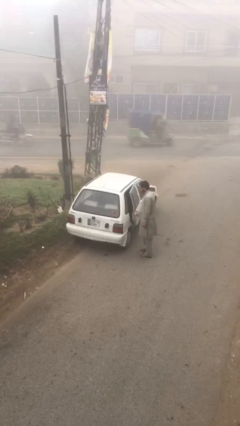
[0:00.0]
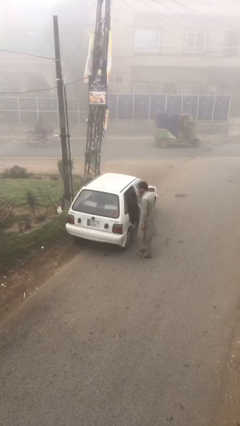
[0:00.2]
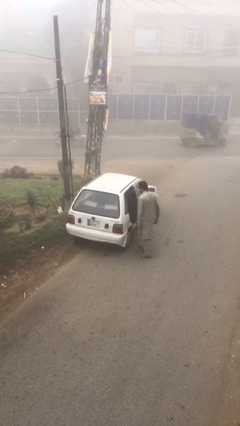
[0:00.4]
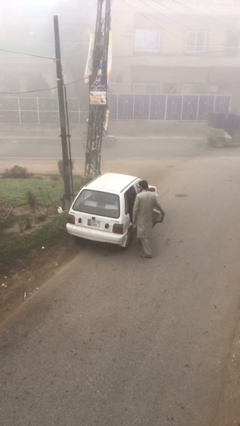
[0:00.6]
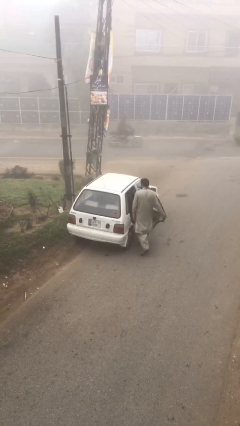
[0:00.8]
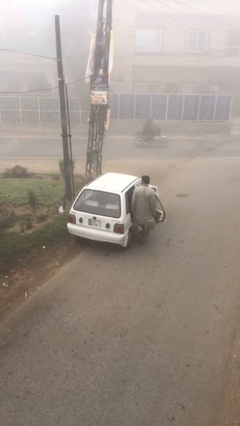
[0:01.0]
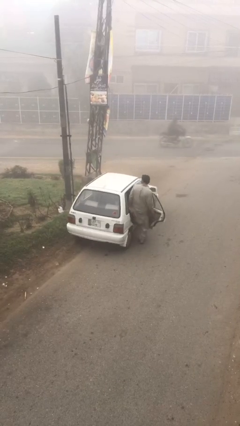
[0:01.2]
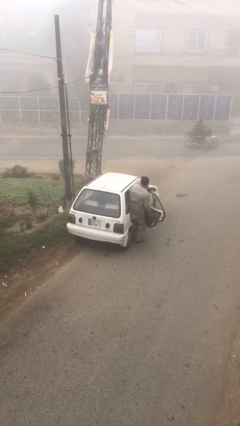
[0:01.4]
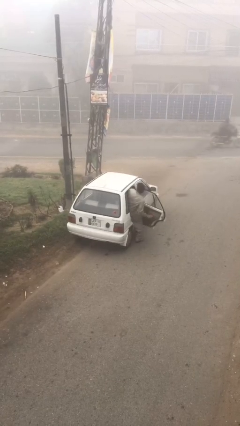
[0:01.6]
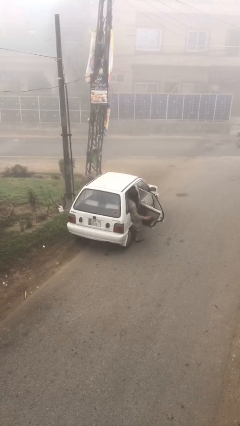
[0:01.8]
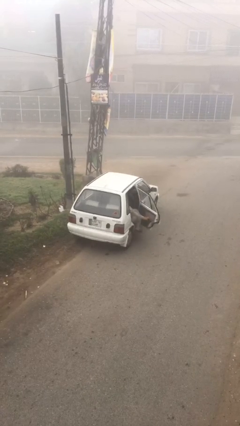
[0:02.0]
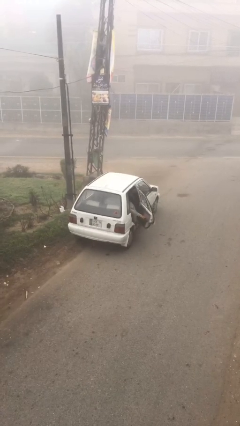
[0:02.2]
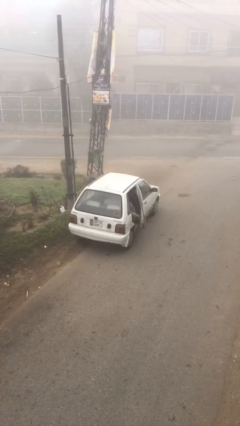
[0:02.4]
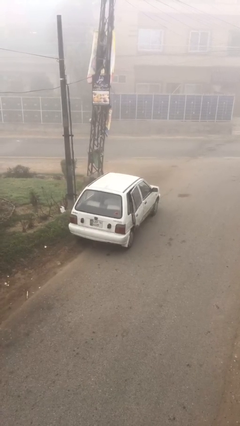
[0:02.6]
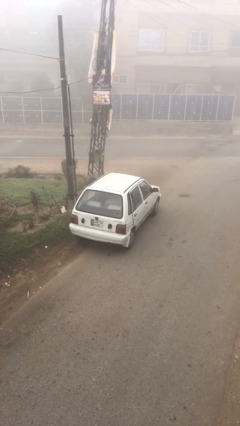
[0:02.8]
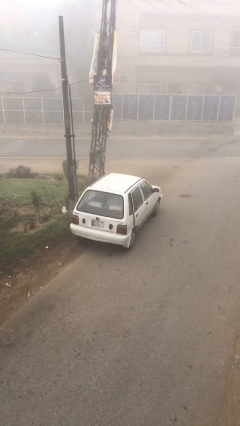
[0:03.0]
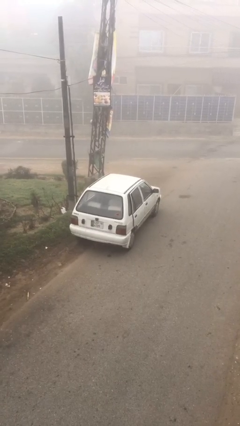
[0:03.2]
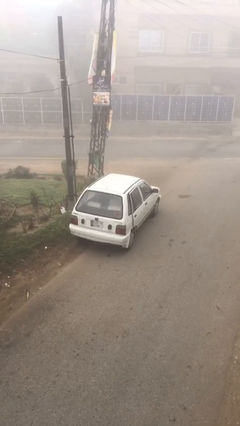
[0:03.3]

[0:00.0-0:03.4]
car picks up person

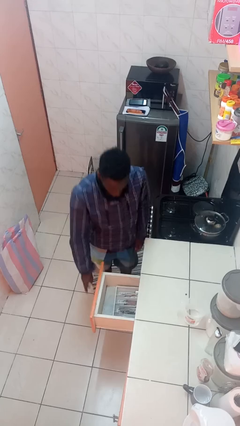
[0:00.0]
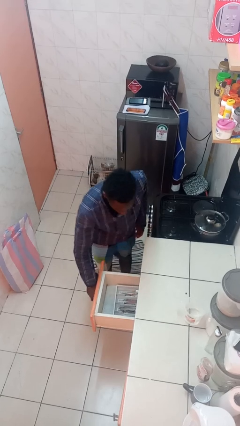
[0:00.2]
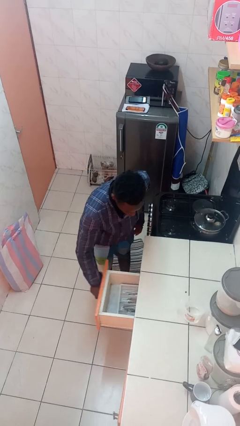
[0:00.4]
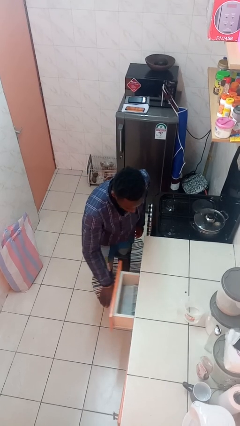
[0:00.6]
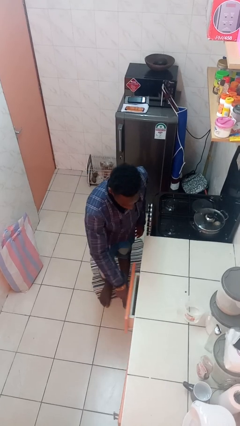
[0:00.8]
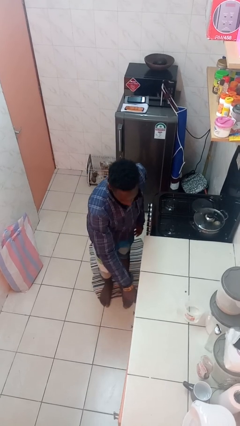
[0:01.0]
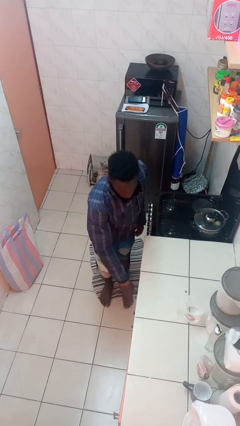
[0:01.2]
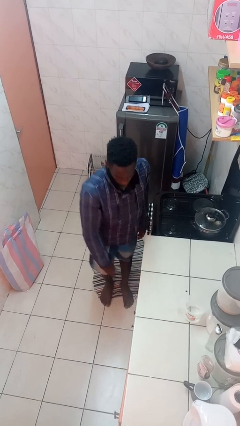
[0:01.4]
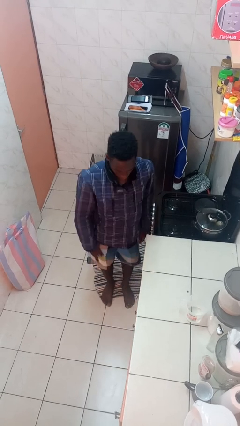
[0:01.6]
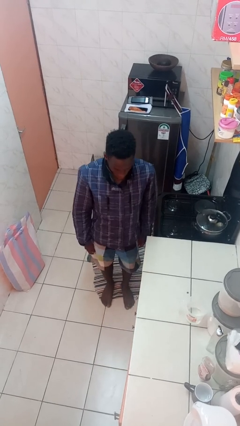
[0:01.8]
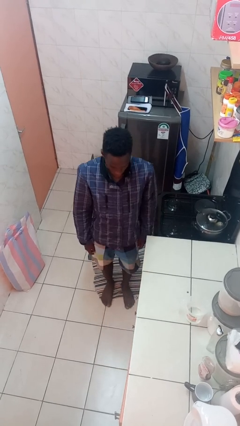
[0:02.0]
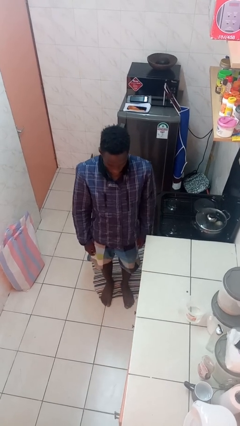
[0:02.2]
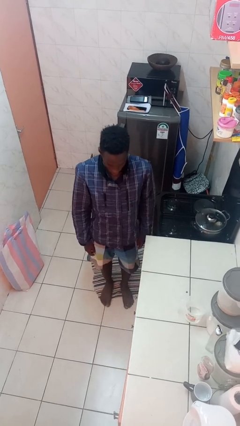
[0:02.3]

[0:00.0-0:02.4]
person closes kitchen drawer

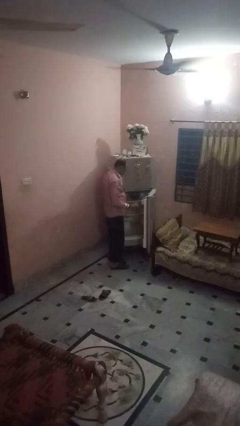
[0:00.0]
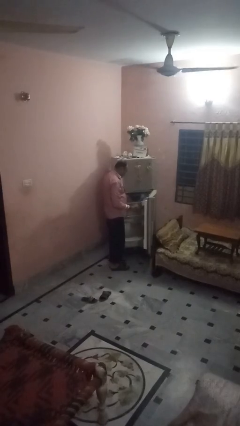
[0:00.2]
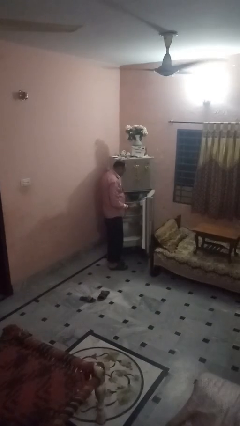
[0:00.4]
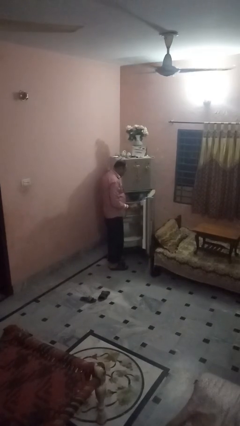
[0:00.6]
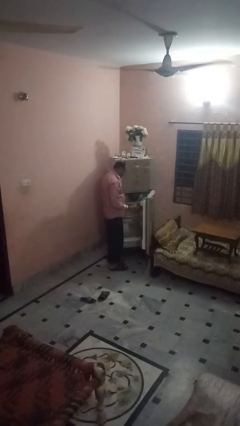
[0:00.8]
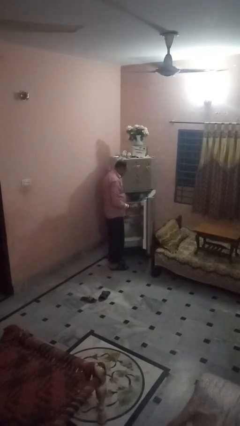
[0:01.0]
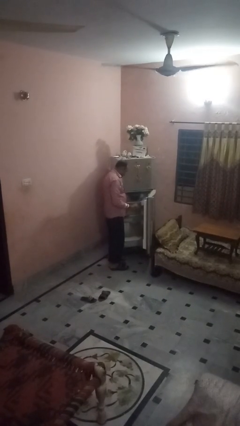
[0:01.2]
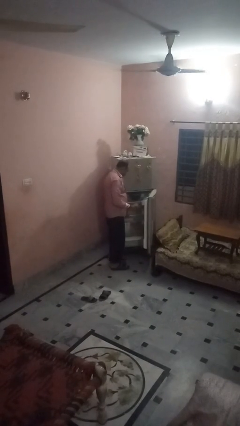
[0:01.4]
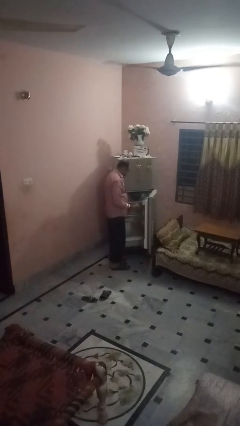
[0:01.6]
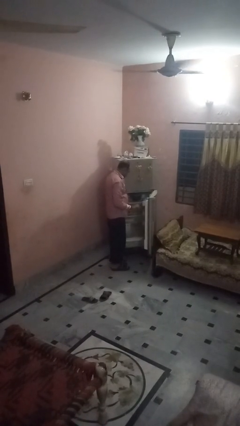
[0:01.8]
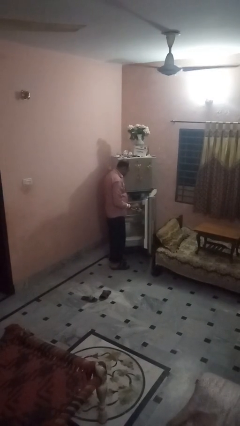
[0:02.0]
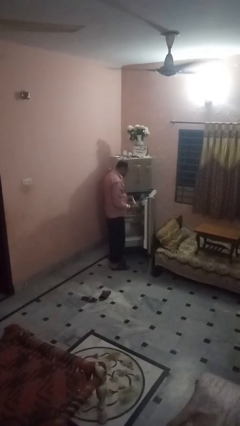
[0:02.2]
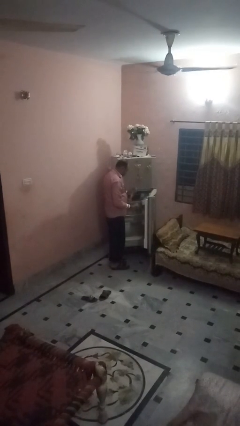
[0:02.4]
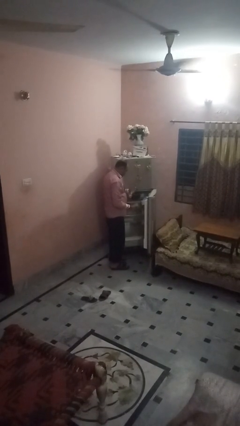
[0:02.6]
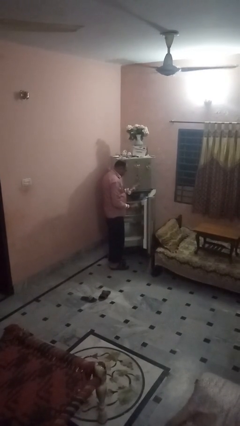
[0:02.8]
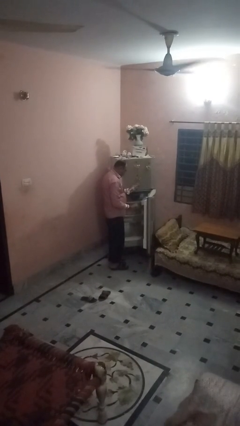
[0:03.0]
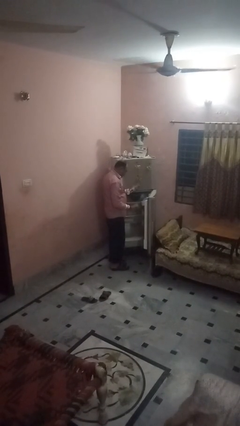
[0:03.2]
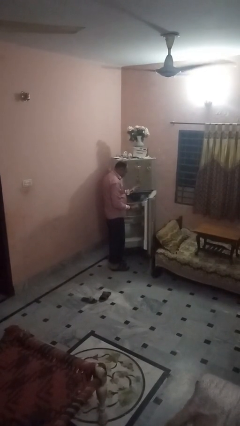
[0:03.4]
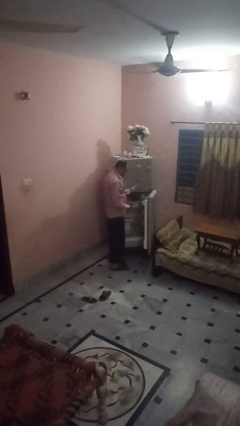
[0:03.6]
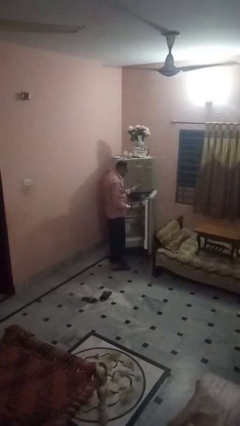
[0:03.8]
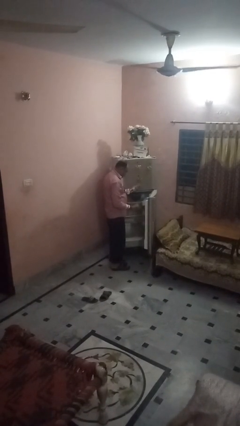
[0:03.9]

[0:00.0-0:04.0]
person puts object into refrigerator

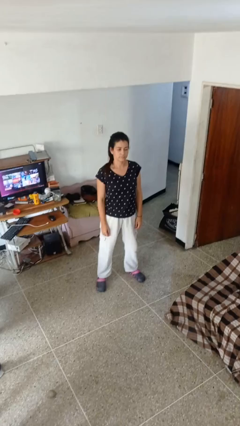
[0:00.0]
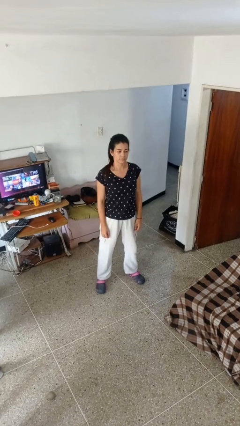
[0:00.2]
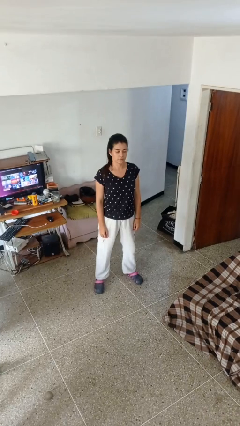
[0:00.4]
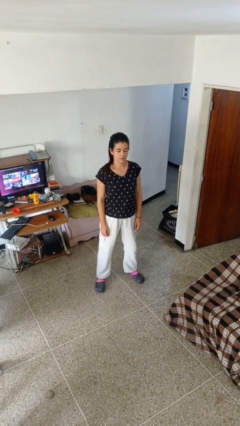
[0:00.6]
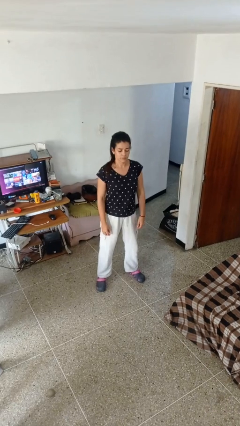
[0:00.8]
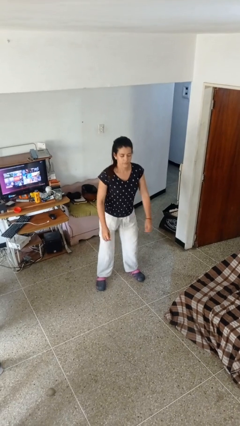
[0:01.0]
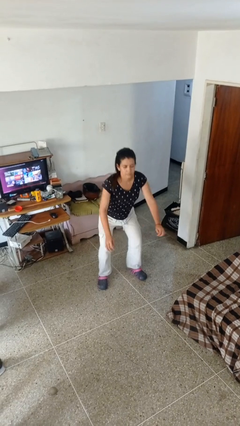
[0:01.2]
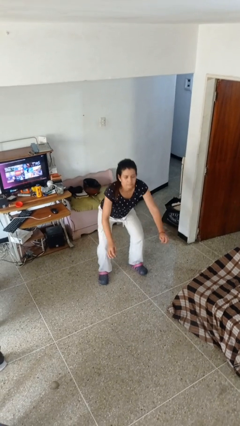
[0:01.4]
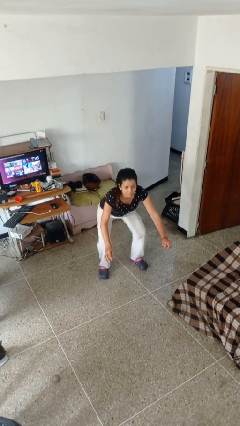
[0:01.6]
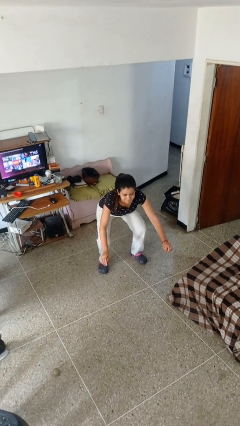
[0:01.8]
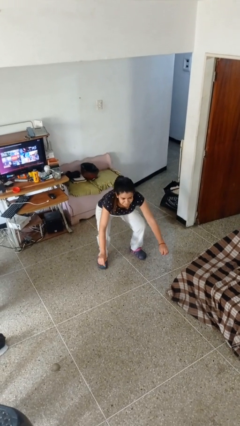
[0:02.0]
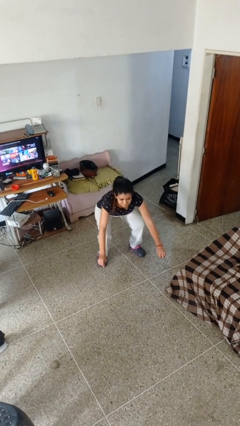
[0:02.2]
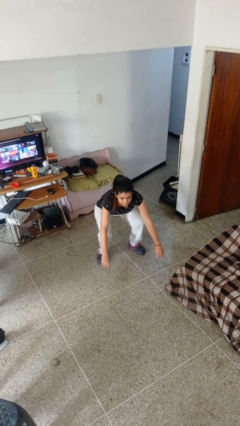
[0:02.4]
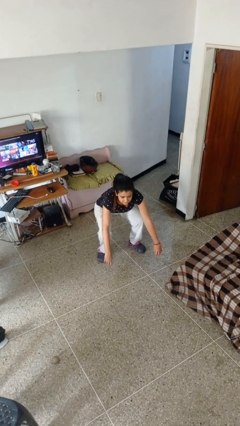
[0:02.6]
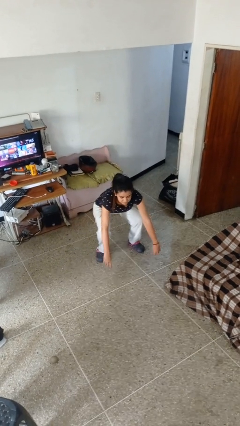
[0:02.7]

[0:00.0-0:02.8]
person squats

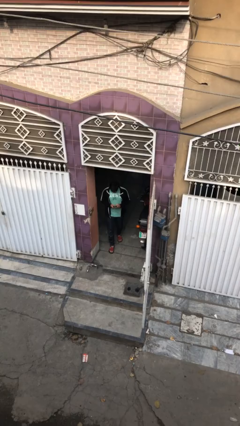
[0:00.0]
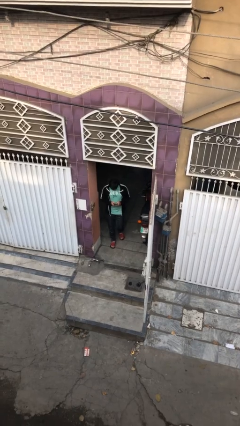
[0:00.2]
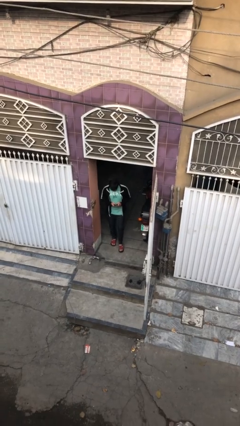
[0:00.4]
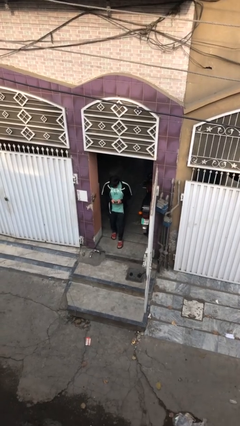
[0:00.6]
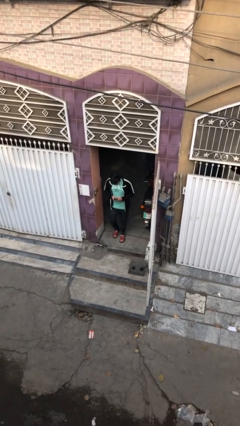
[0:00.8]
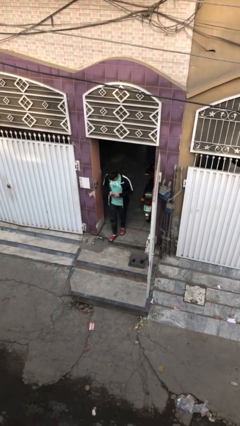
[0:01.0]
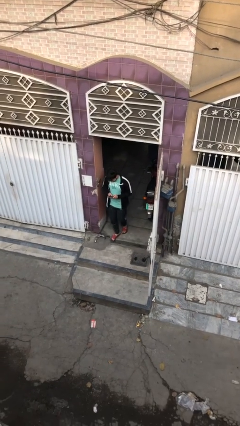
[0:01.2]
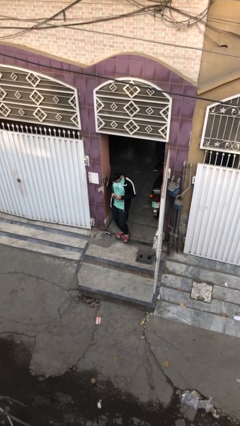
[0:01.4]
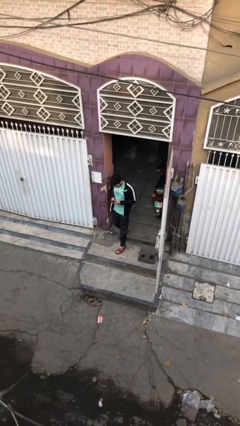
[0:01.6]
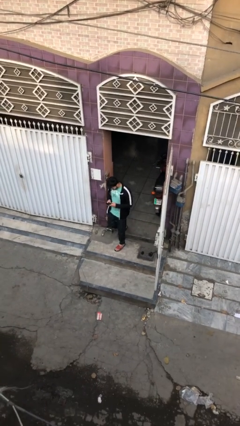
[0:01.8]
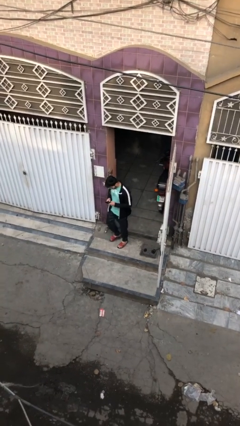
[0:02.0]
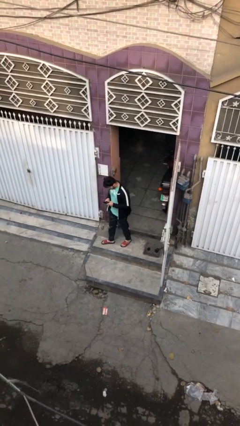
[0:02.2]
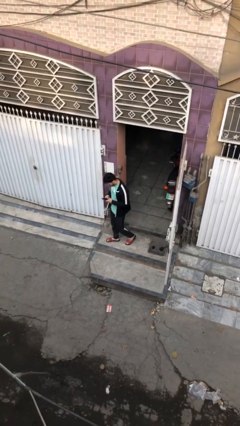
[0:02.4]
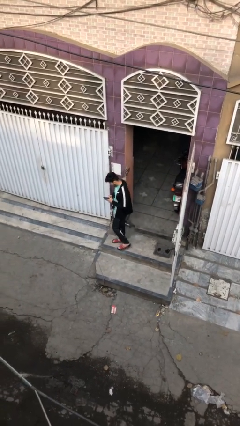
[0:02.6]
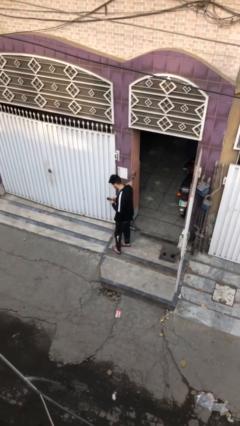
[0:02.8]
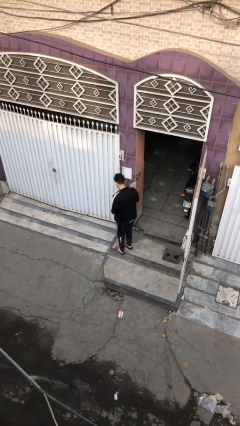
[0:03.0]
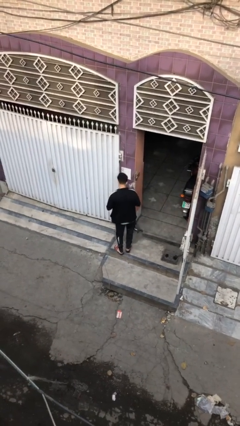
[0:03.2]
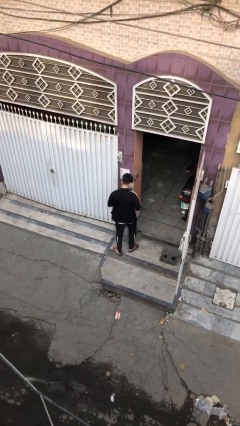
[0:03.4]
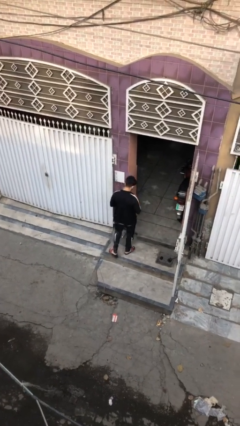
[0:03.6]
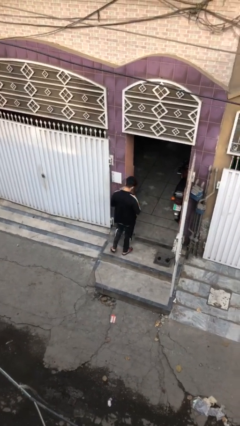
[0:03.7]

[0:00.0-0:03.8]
person enters scene through structure

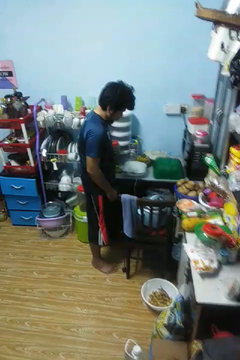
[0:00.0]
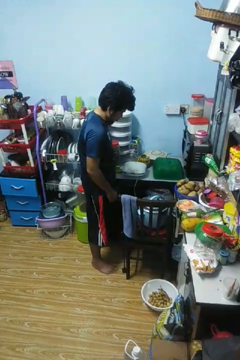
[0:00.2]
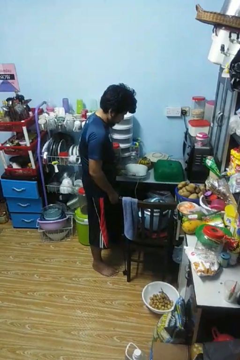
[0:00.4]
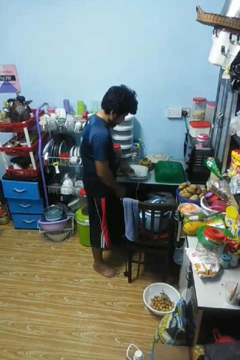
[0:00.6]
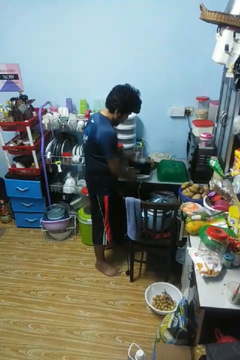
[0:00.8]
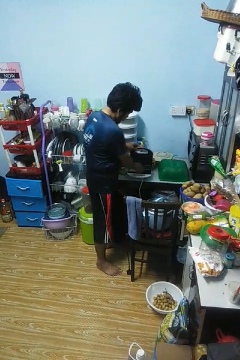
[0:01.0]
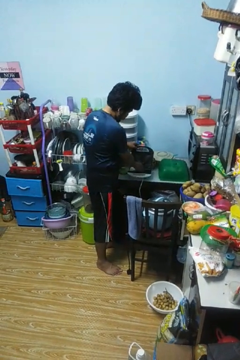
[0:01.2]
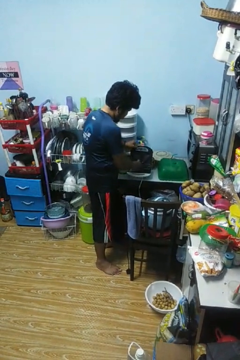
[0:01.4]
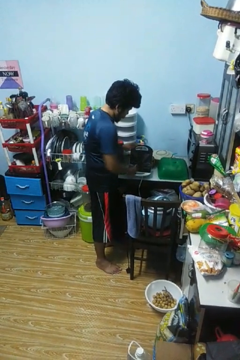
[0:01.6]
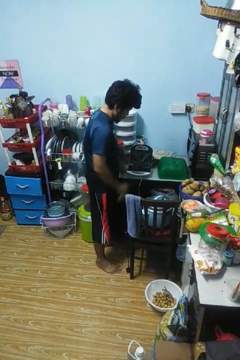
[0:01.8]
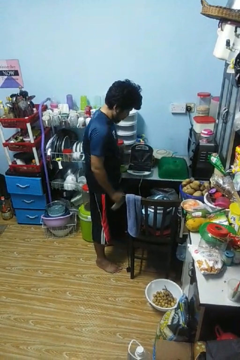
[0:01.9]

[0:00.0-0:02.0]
person takes object from toaster
